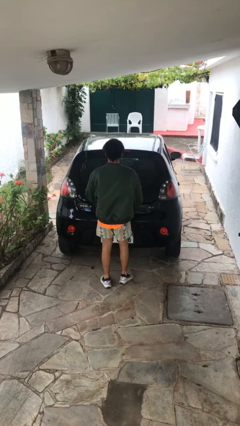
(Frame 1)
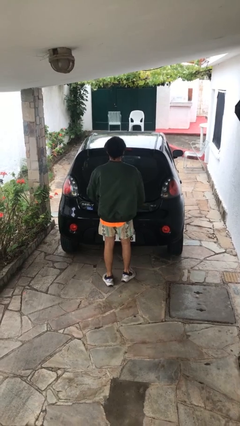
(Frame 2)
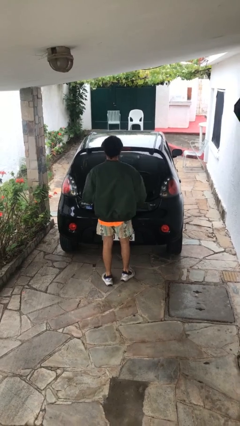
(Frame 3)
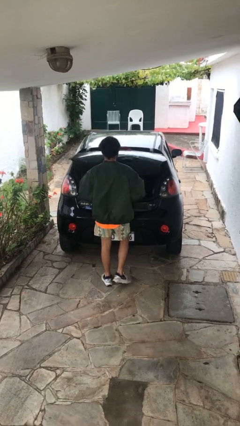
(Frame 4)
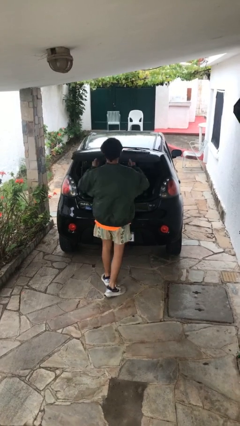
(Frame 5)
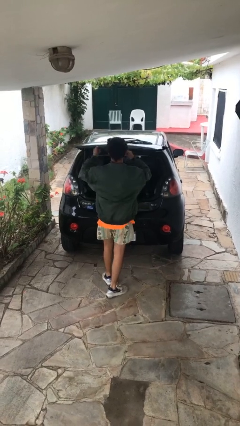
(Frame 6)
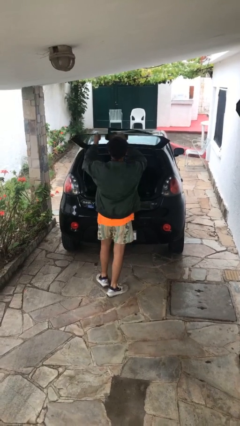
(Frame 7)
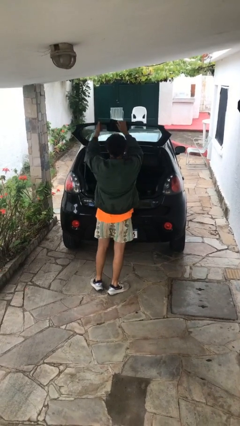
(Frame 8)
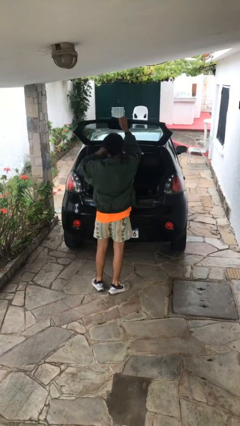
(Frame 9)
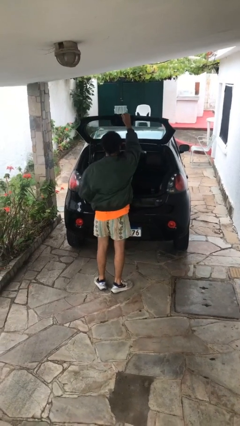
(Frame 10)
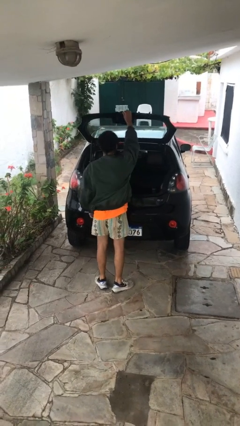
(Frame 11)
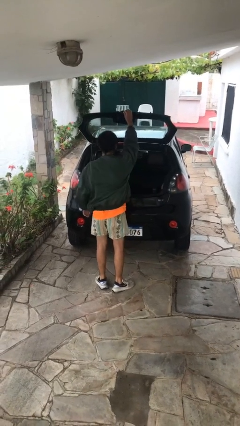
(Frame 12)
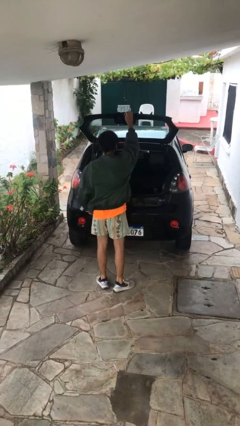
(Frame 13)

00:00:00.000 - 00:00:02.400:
person opens car trunk

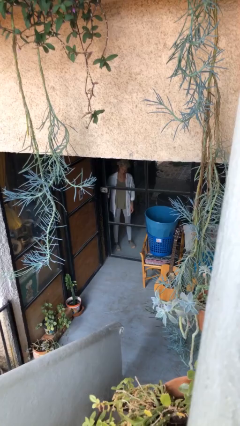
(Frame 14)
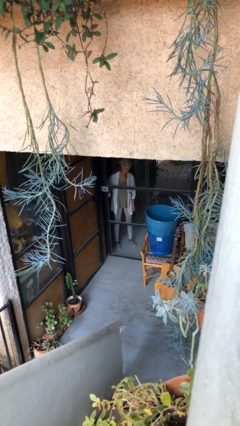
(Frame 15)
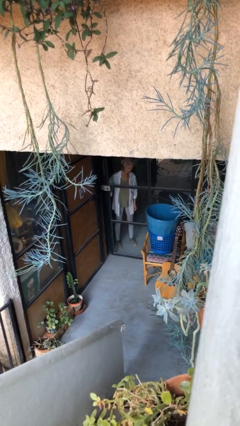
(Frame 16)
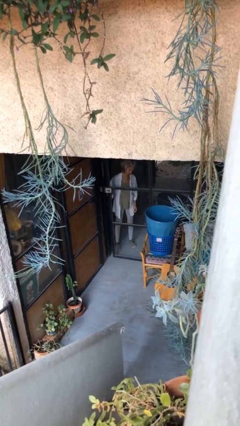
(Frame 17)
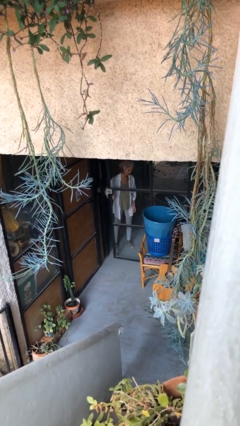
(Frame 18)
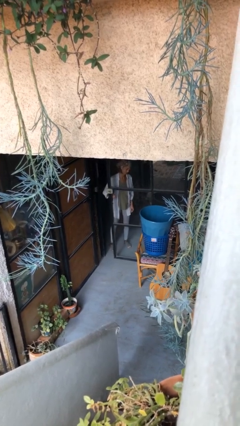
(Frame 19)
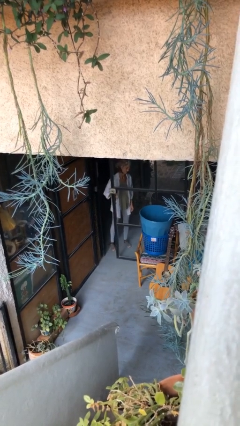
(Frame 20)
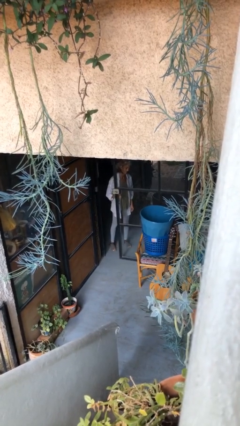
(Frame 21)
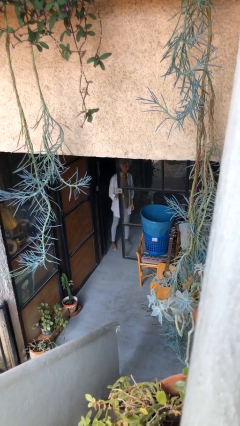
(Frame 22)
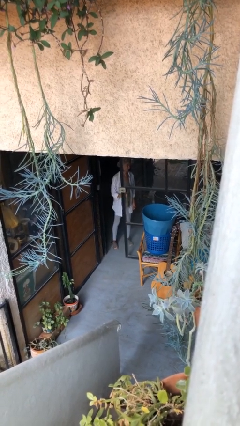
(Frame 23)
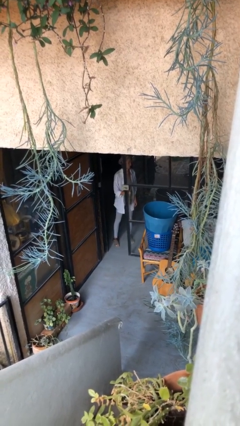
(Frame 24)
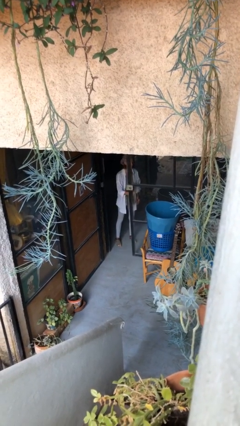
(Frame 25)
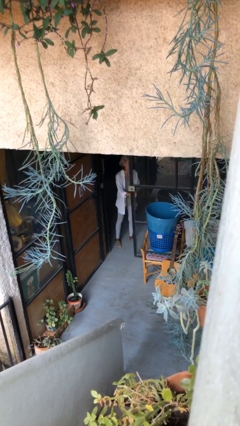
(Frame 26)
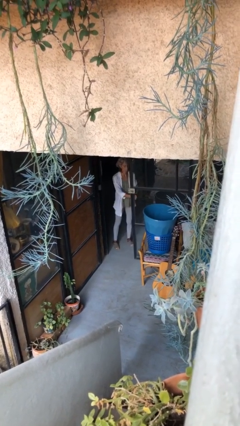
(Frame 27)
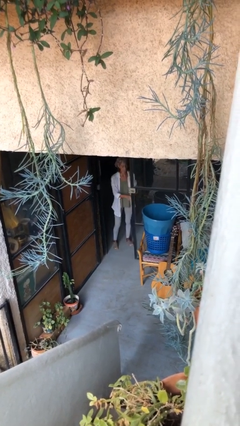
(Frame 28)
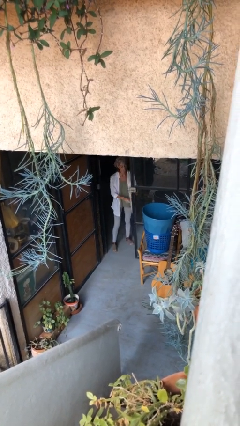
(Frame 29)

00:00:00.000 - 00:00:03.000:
person opens facility door

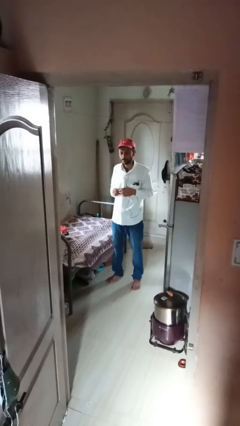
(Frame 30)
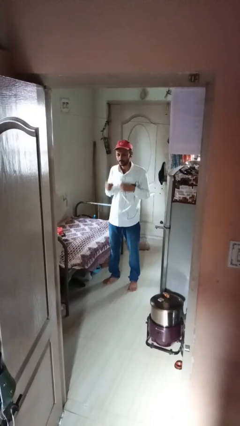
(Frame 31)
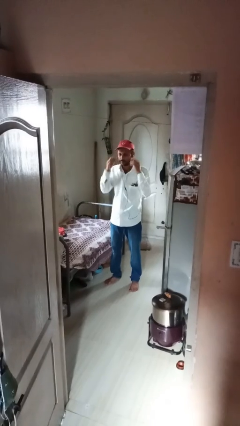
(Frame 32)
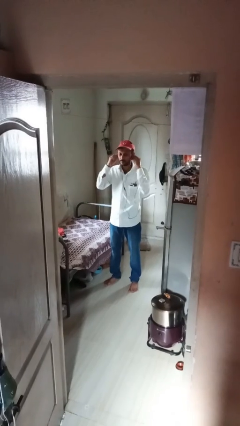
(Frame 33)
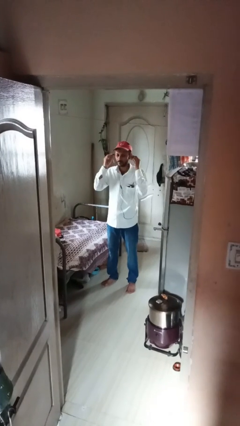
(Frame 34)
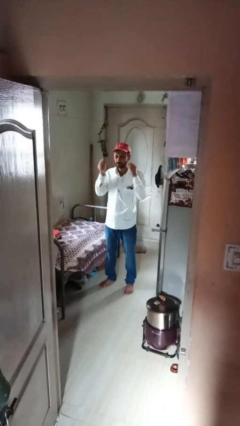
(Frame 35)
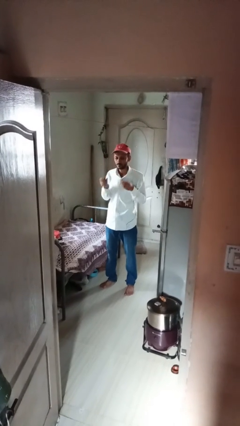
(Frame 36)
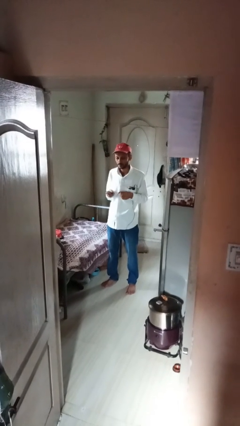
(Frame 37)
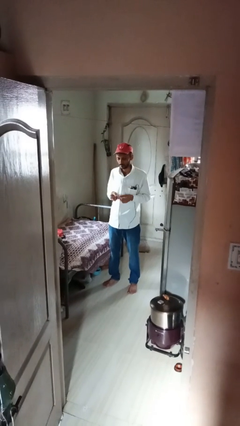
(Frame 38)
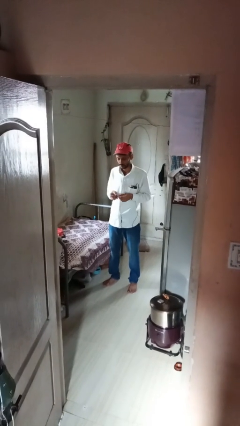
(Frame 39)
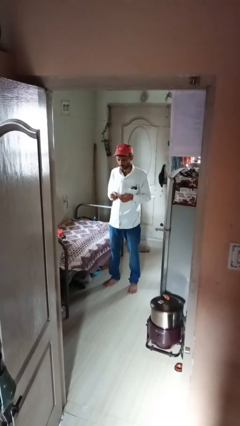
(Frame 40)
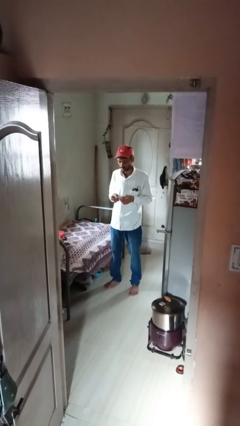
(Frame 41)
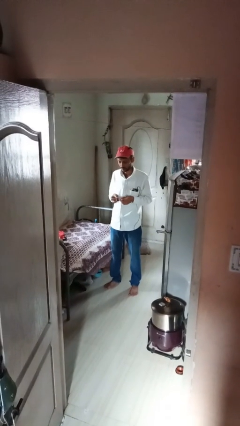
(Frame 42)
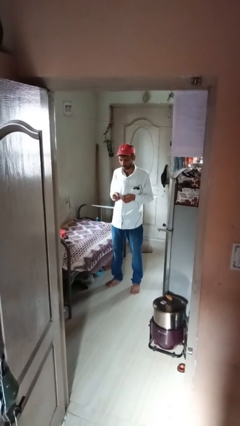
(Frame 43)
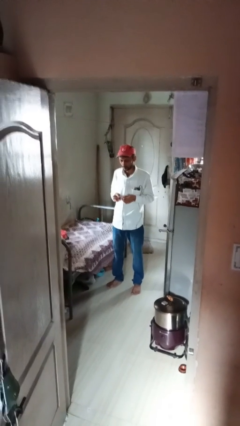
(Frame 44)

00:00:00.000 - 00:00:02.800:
person takes off headphones

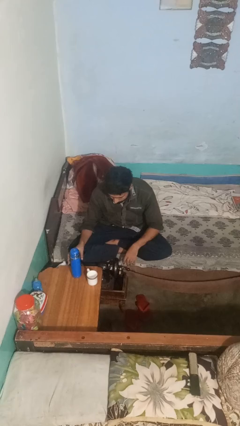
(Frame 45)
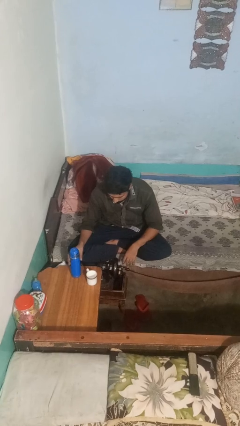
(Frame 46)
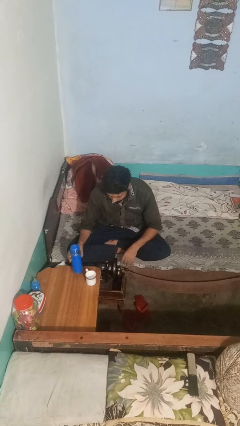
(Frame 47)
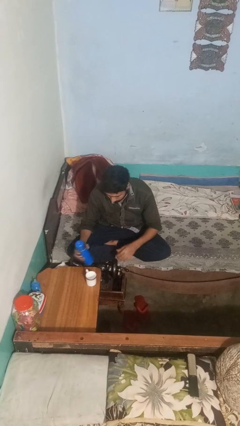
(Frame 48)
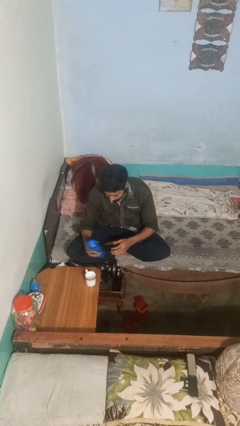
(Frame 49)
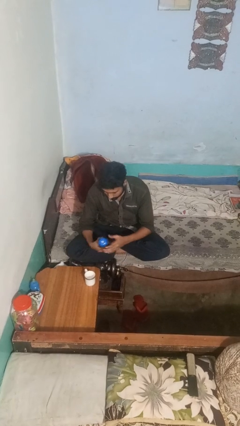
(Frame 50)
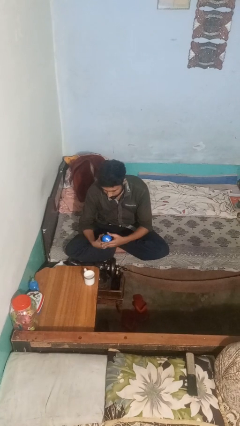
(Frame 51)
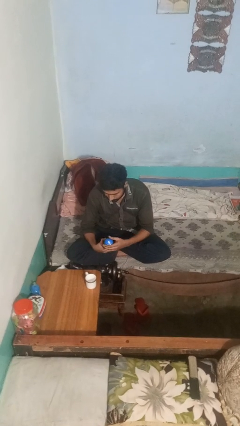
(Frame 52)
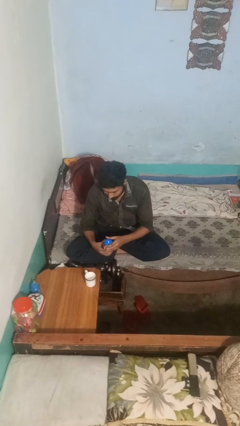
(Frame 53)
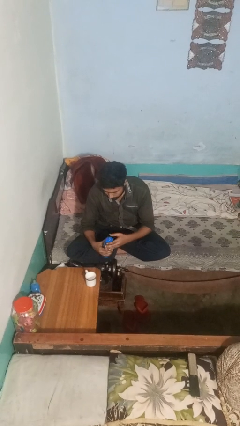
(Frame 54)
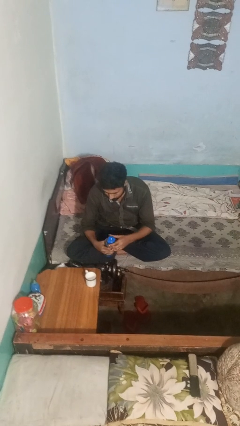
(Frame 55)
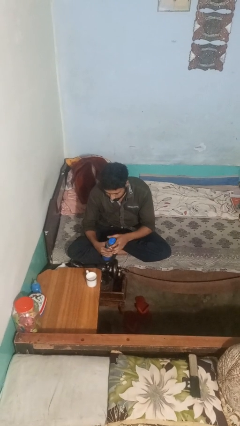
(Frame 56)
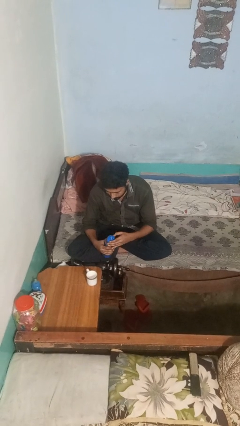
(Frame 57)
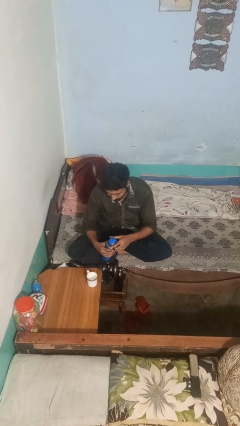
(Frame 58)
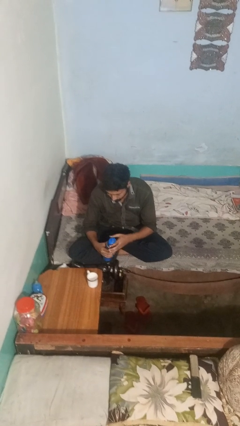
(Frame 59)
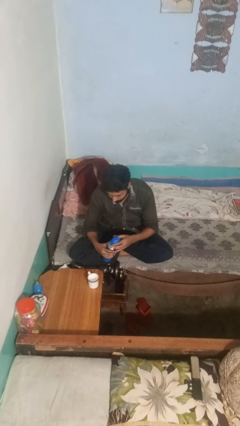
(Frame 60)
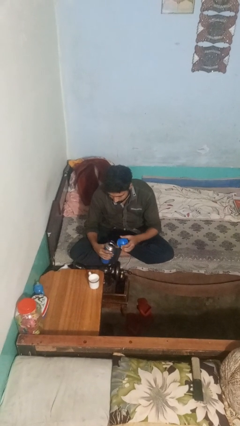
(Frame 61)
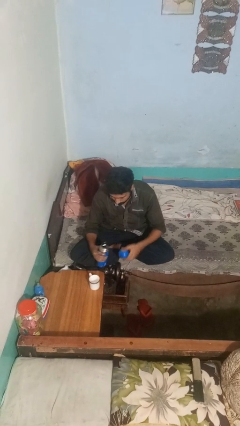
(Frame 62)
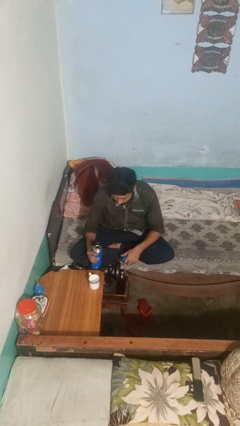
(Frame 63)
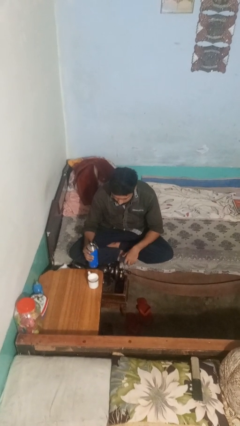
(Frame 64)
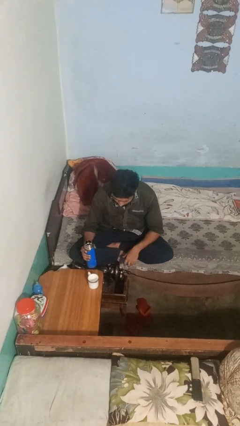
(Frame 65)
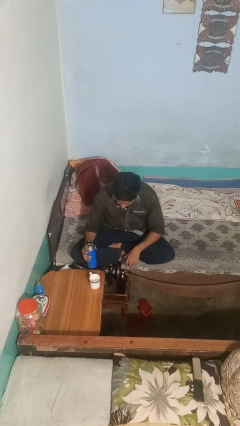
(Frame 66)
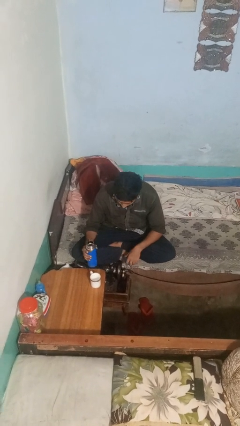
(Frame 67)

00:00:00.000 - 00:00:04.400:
person unscrews lid from bottle

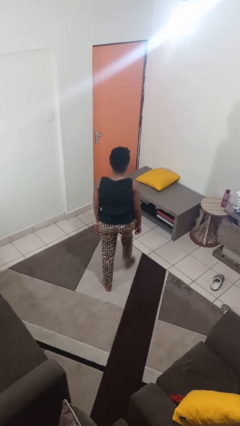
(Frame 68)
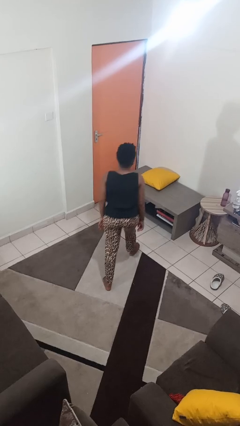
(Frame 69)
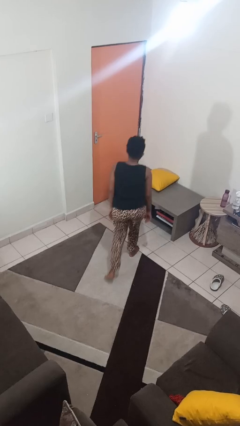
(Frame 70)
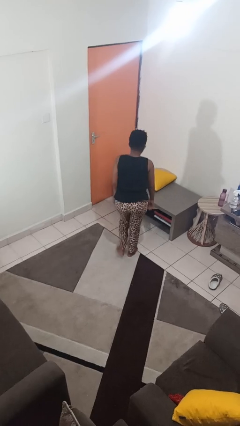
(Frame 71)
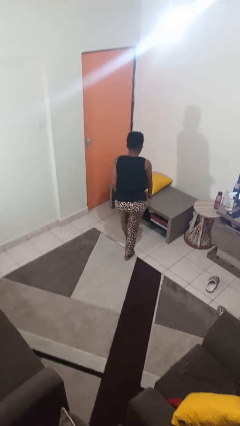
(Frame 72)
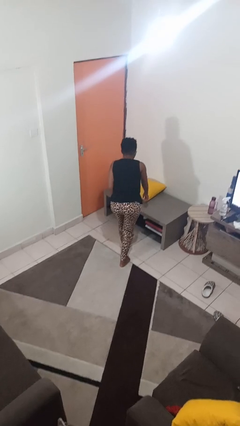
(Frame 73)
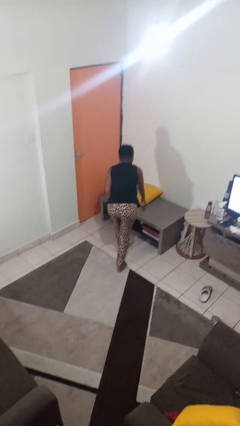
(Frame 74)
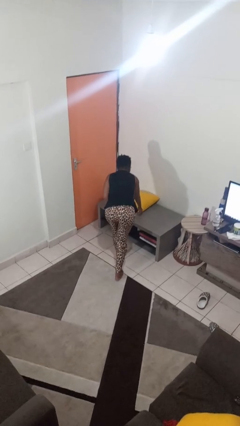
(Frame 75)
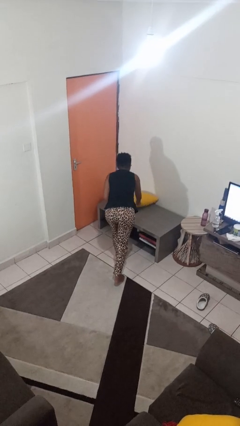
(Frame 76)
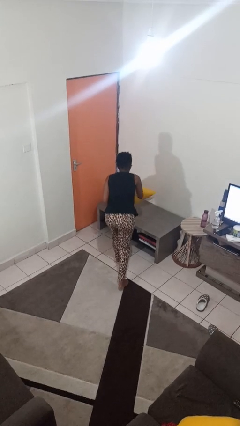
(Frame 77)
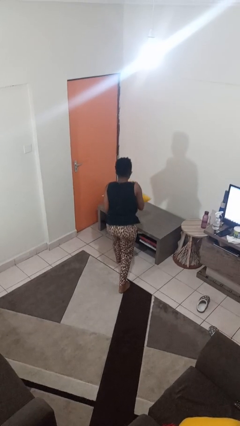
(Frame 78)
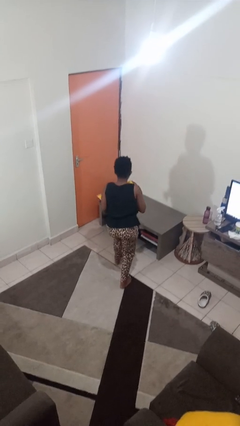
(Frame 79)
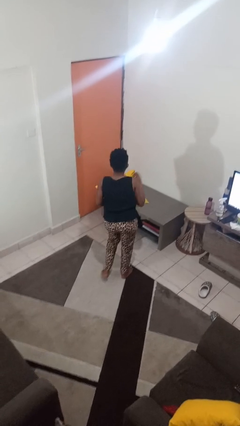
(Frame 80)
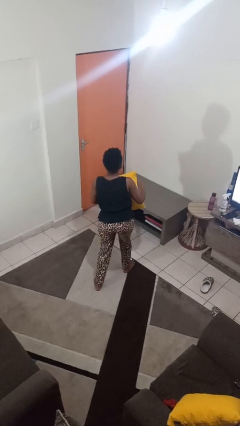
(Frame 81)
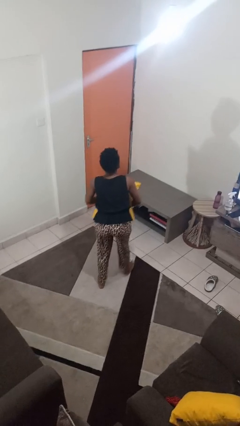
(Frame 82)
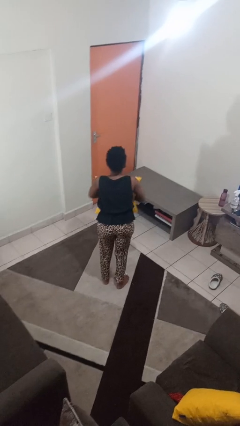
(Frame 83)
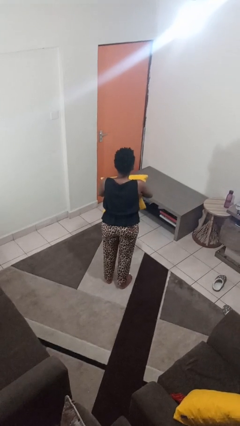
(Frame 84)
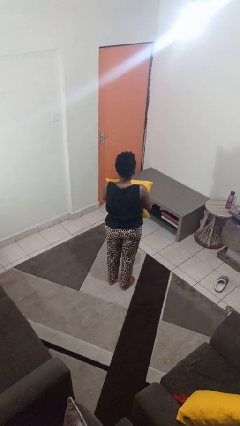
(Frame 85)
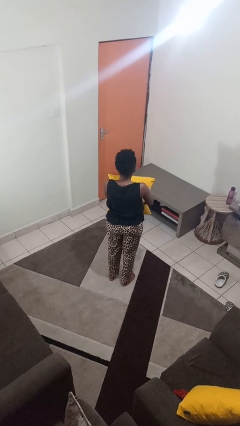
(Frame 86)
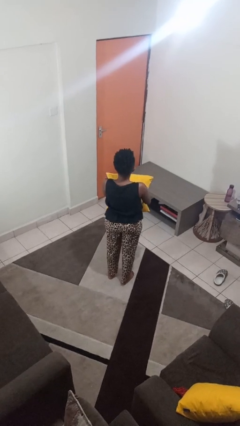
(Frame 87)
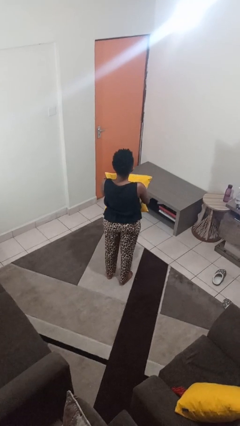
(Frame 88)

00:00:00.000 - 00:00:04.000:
person picks up object from table
